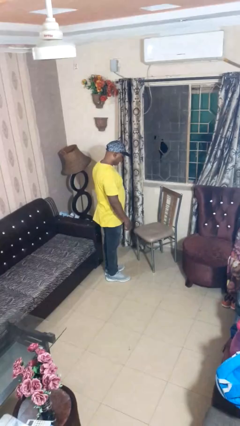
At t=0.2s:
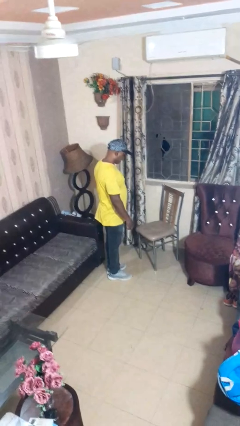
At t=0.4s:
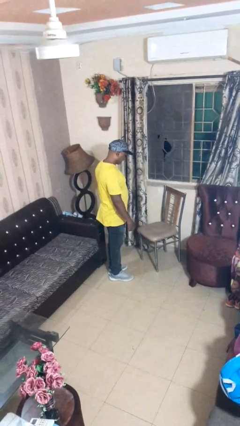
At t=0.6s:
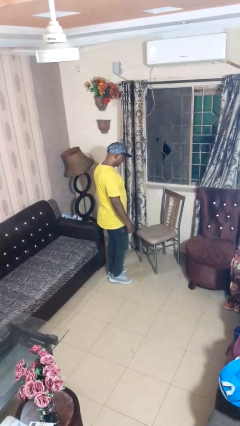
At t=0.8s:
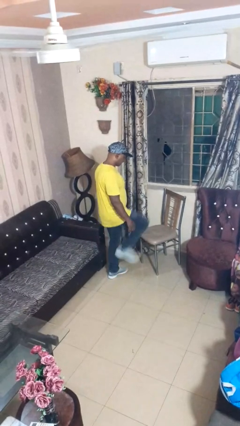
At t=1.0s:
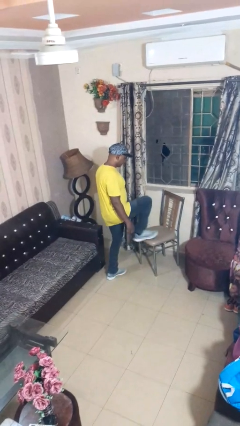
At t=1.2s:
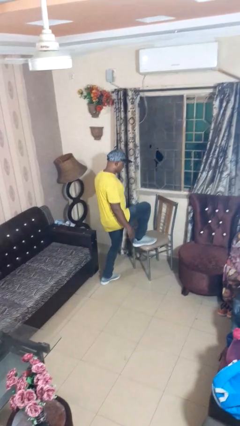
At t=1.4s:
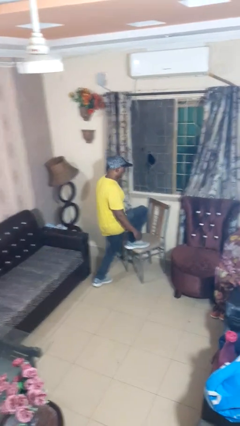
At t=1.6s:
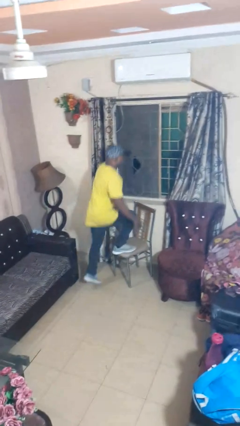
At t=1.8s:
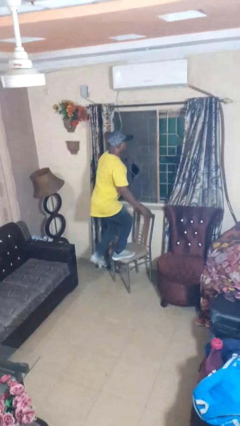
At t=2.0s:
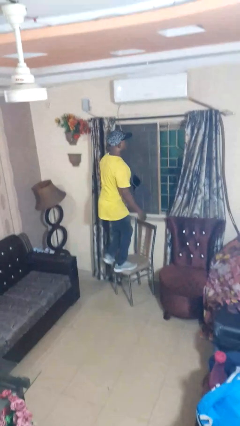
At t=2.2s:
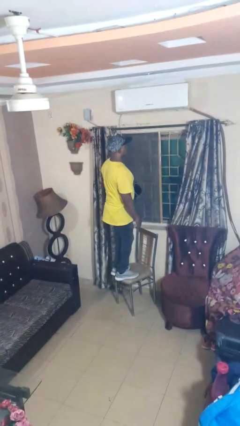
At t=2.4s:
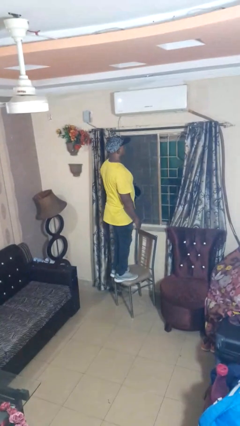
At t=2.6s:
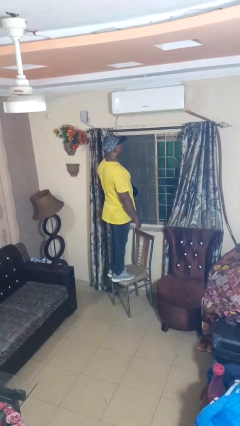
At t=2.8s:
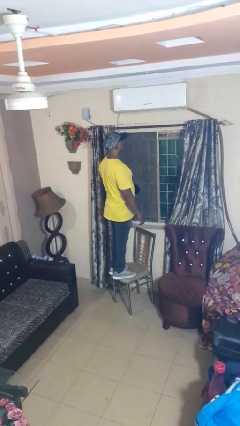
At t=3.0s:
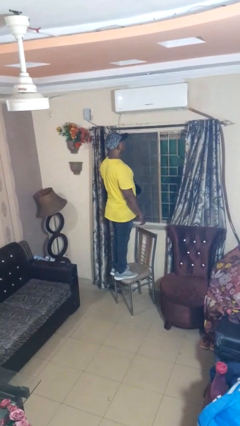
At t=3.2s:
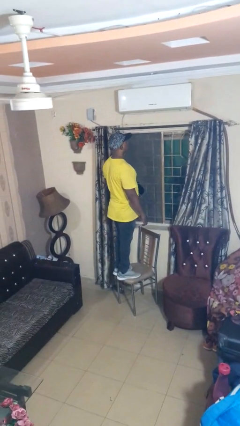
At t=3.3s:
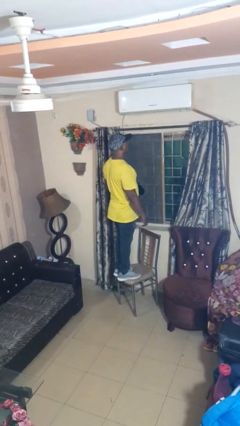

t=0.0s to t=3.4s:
person climbs on chair

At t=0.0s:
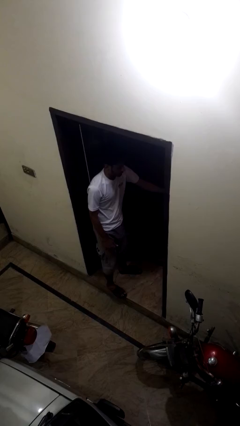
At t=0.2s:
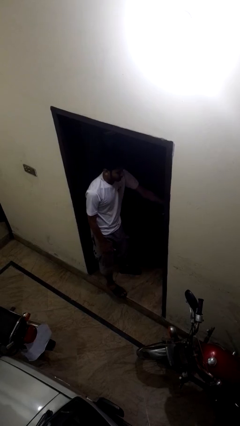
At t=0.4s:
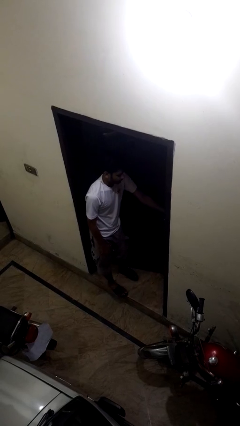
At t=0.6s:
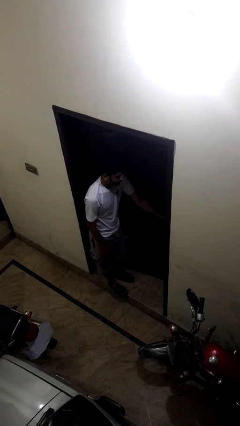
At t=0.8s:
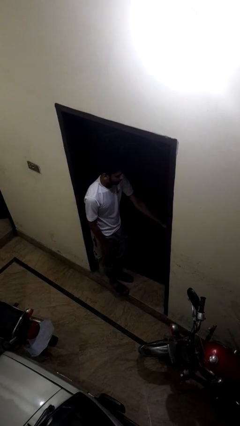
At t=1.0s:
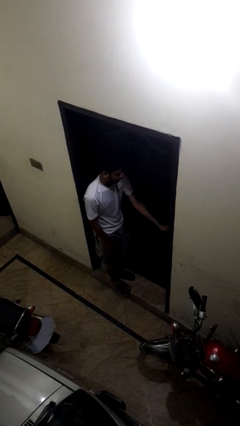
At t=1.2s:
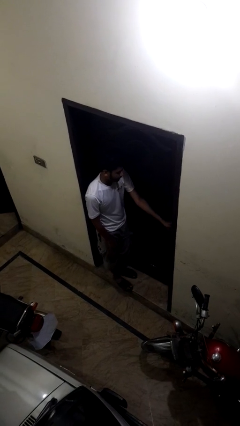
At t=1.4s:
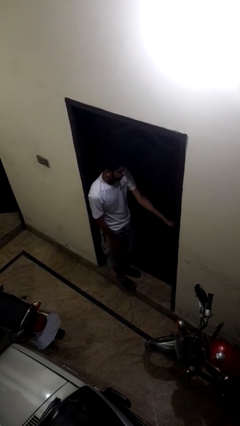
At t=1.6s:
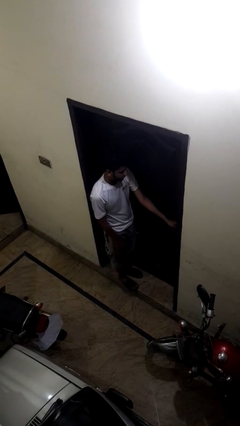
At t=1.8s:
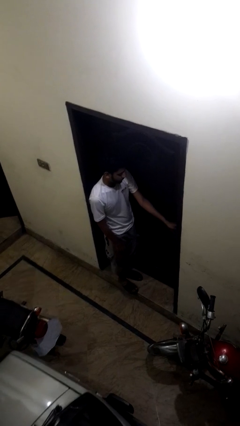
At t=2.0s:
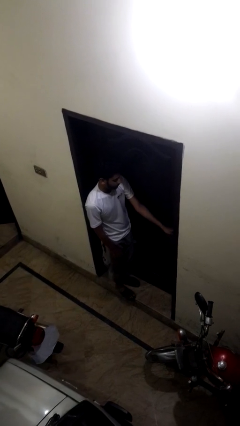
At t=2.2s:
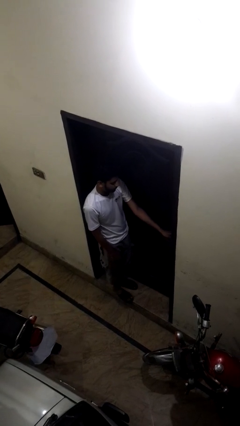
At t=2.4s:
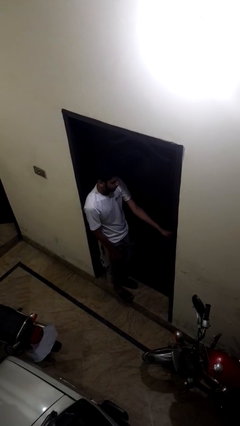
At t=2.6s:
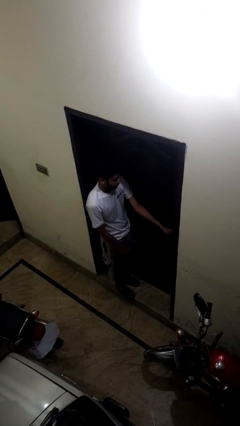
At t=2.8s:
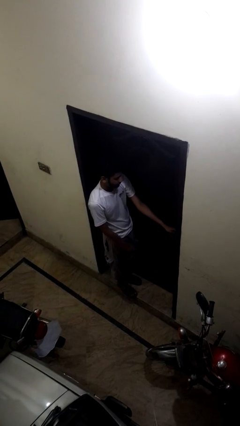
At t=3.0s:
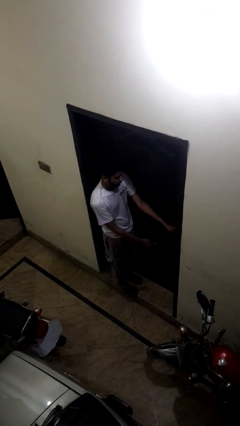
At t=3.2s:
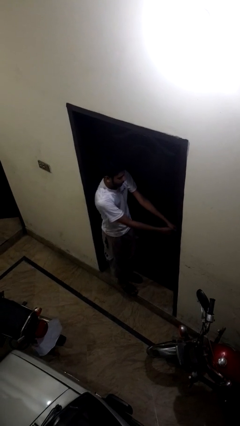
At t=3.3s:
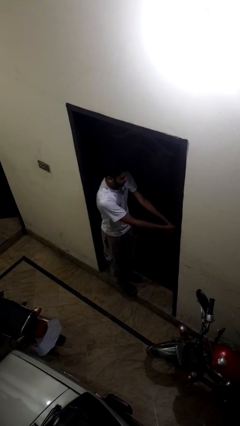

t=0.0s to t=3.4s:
person closes facility door

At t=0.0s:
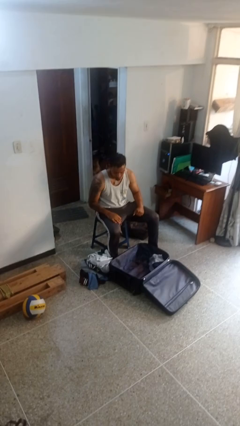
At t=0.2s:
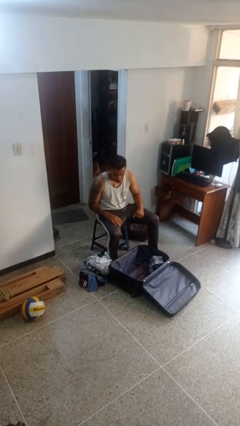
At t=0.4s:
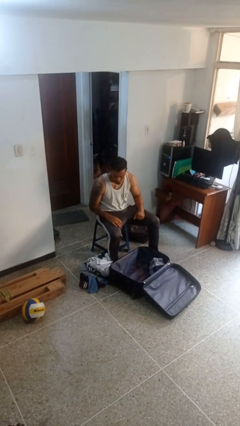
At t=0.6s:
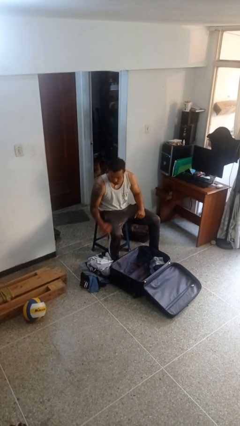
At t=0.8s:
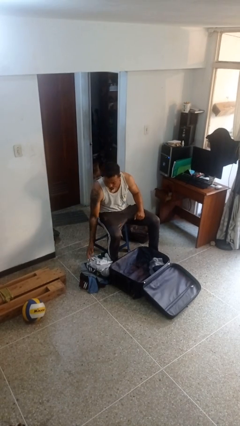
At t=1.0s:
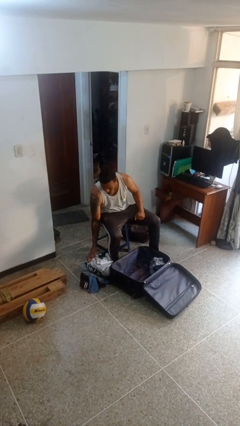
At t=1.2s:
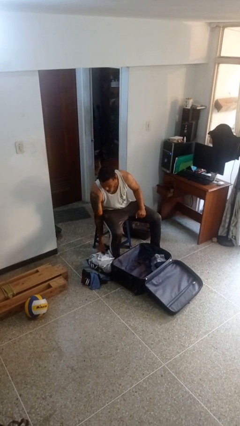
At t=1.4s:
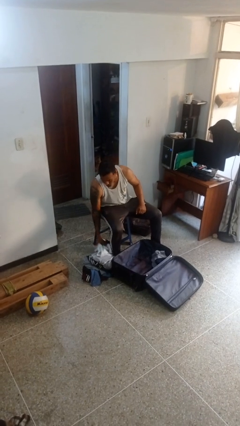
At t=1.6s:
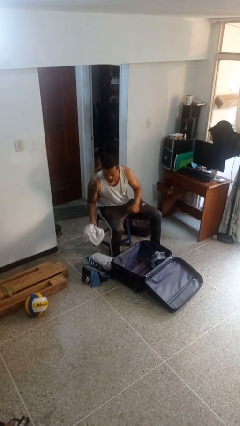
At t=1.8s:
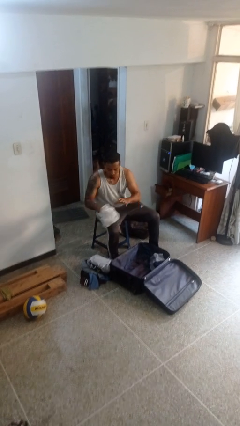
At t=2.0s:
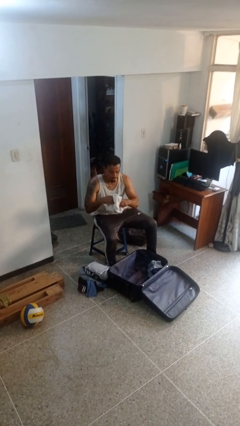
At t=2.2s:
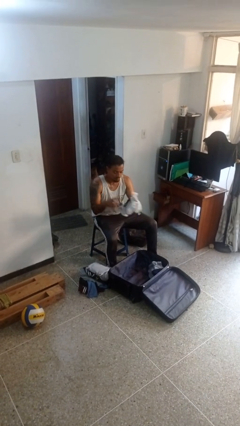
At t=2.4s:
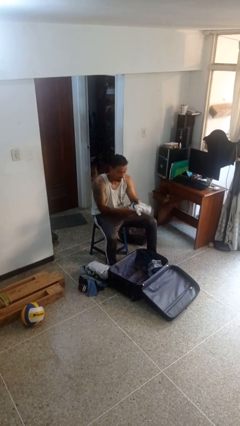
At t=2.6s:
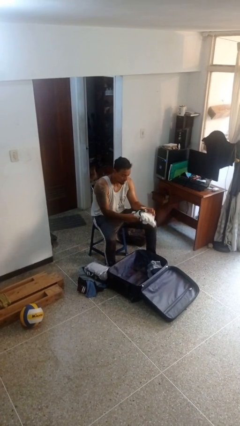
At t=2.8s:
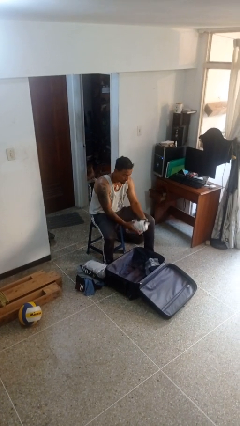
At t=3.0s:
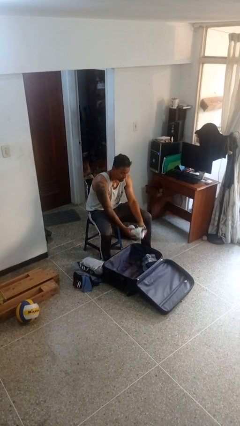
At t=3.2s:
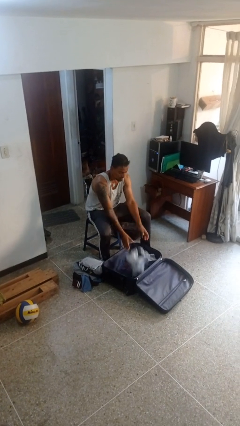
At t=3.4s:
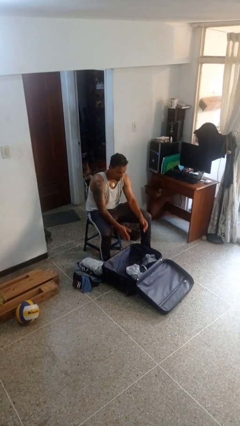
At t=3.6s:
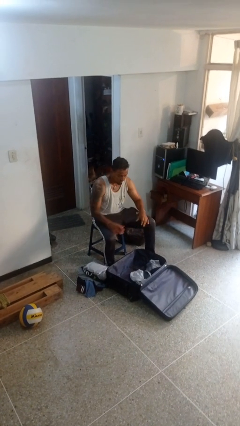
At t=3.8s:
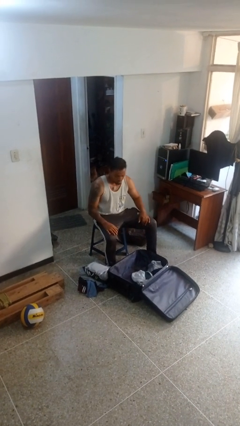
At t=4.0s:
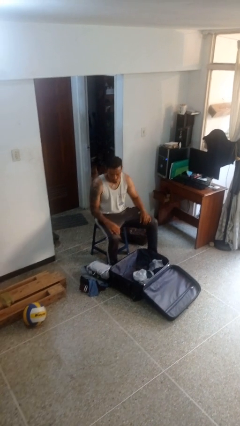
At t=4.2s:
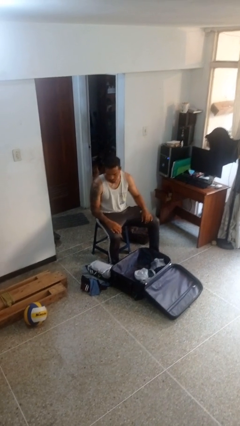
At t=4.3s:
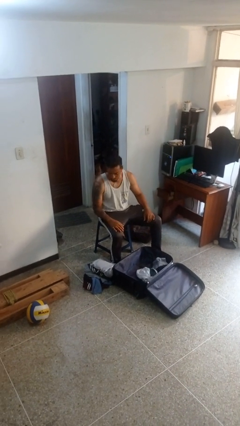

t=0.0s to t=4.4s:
person loads clothes into suitcase

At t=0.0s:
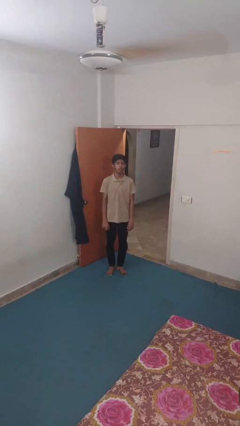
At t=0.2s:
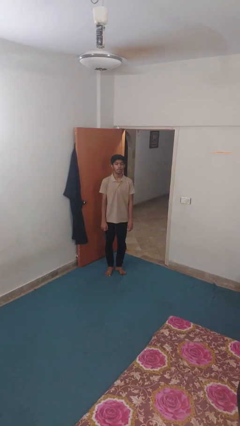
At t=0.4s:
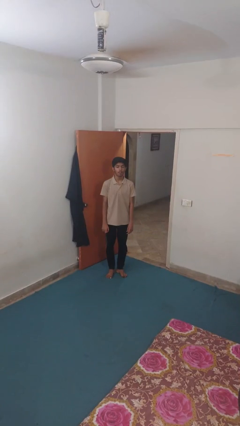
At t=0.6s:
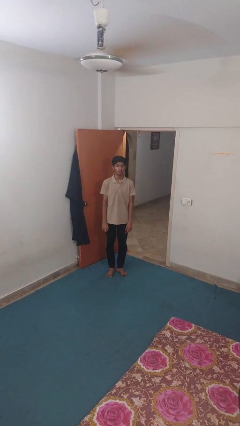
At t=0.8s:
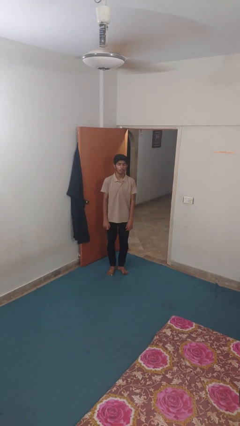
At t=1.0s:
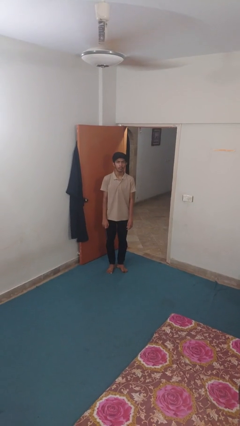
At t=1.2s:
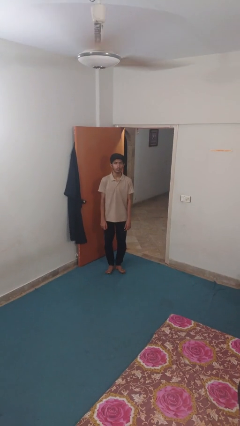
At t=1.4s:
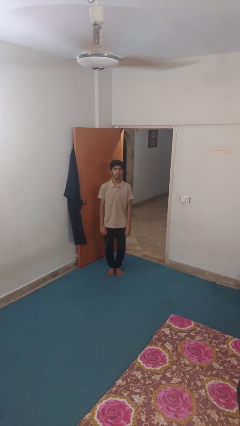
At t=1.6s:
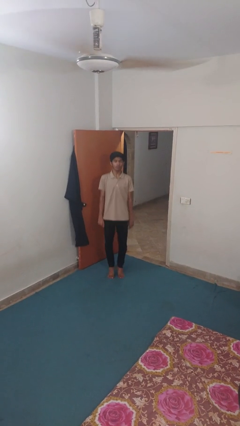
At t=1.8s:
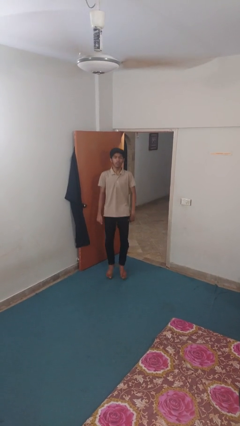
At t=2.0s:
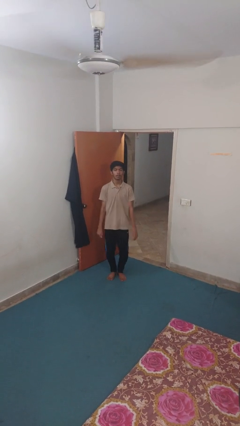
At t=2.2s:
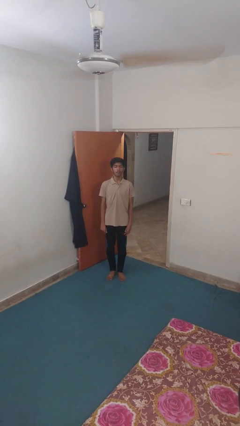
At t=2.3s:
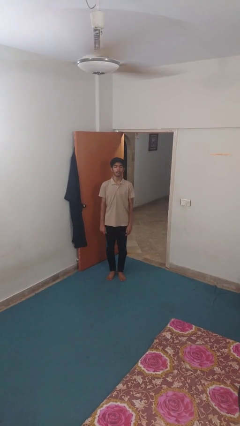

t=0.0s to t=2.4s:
person jumps

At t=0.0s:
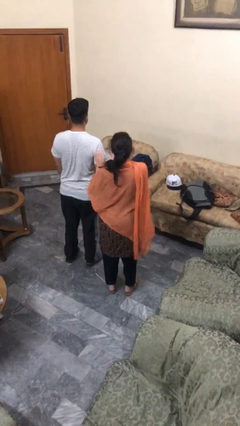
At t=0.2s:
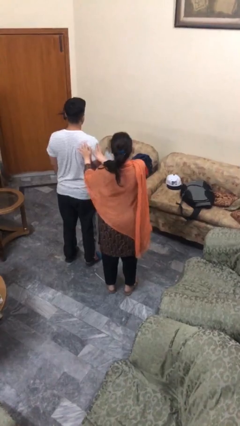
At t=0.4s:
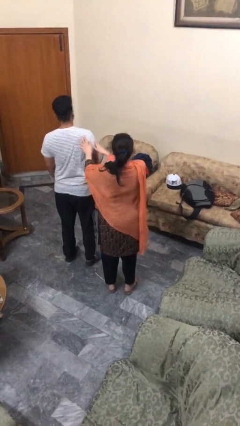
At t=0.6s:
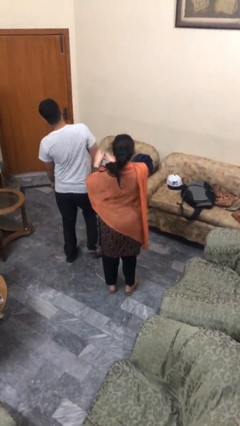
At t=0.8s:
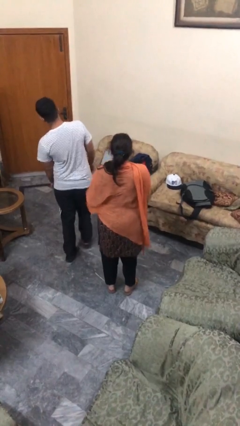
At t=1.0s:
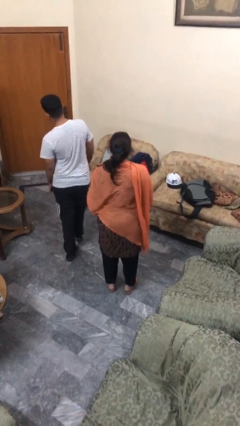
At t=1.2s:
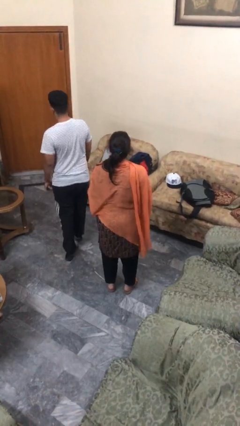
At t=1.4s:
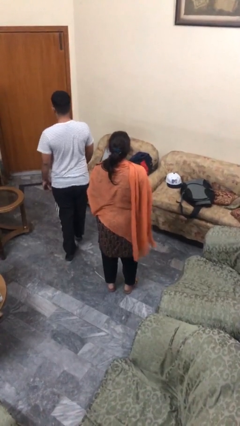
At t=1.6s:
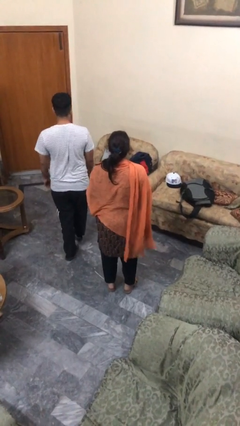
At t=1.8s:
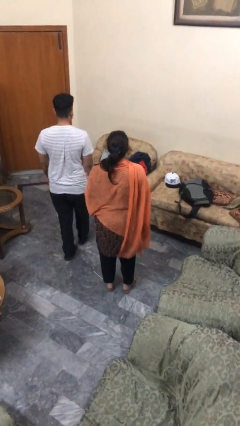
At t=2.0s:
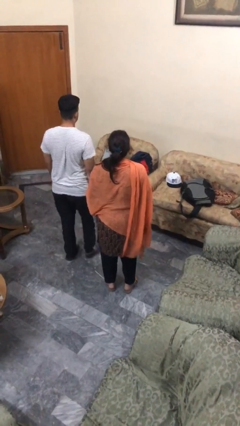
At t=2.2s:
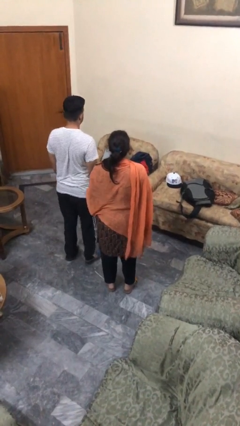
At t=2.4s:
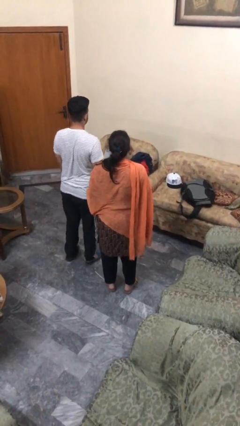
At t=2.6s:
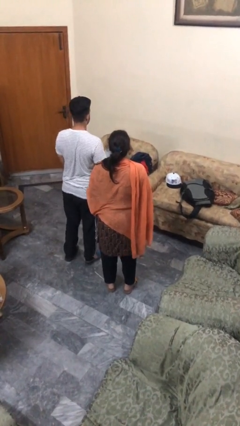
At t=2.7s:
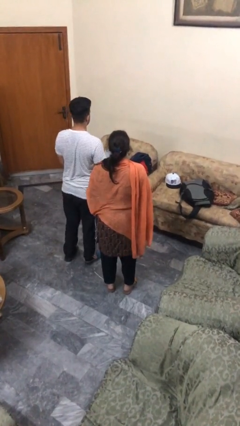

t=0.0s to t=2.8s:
person shoves person

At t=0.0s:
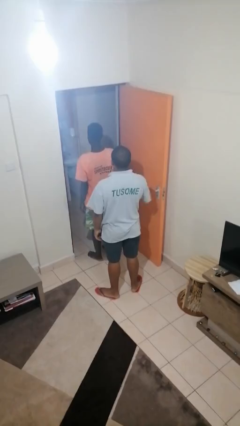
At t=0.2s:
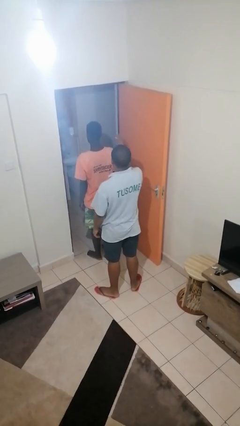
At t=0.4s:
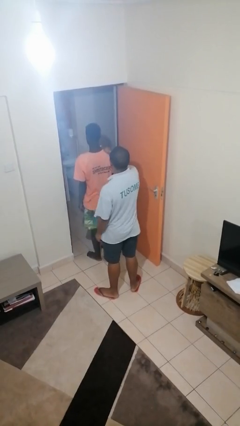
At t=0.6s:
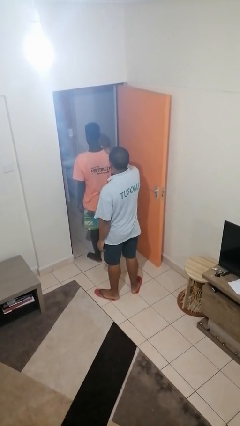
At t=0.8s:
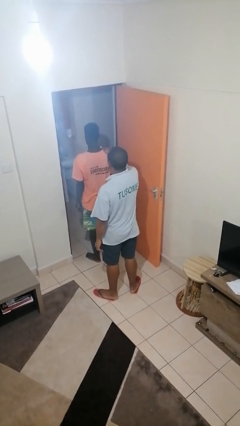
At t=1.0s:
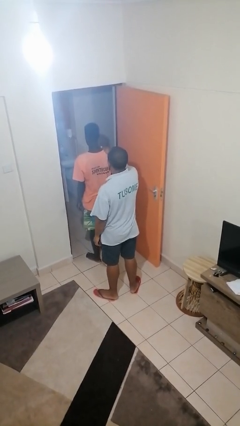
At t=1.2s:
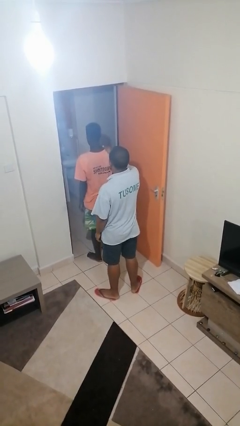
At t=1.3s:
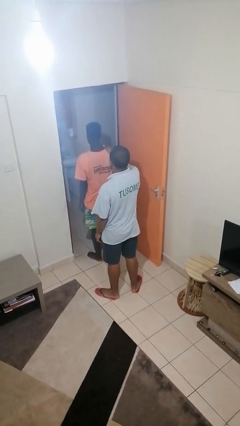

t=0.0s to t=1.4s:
person grabs person by shoulder
